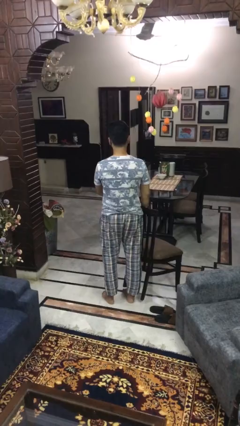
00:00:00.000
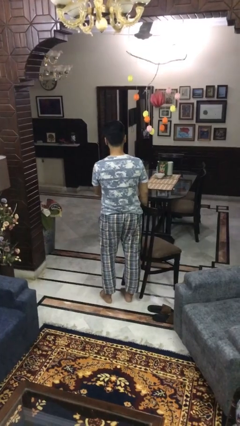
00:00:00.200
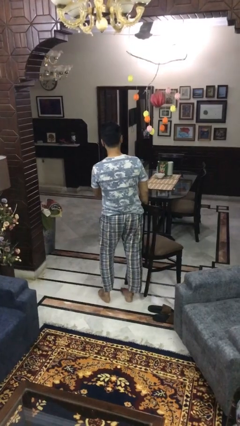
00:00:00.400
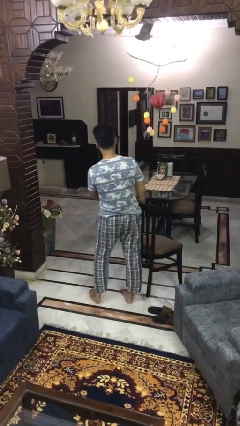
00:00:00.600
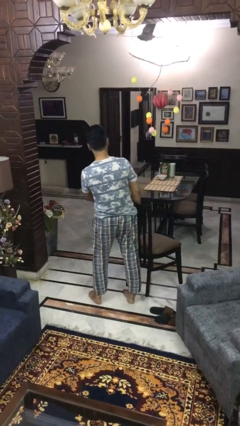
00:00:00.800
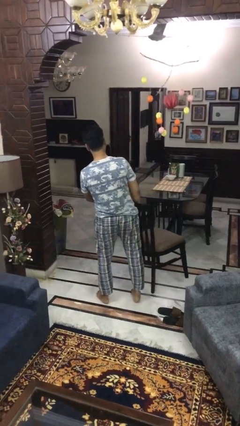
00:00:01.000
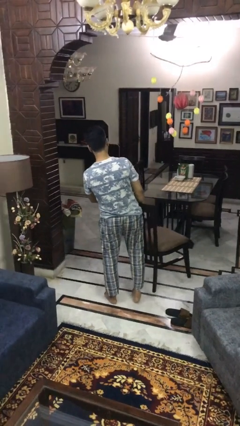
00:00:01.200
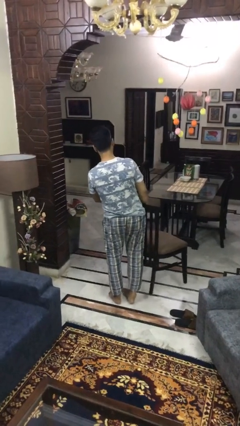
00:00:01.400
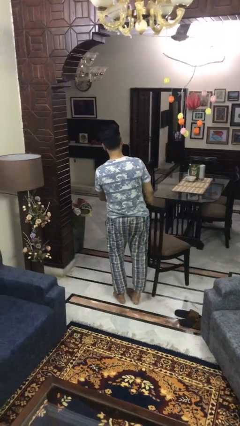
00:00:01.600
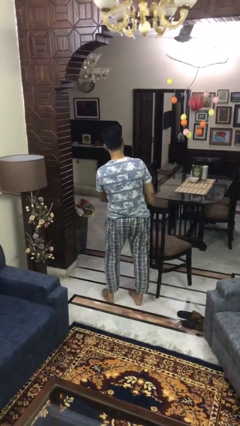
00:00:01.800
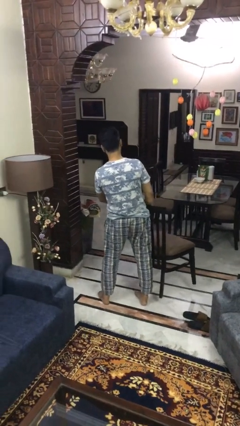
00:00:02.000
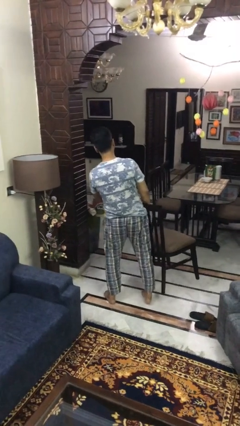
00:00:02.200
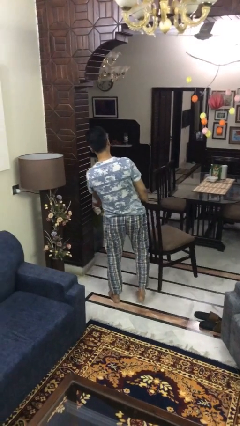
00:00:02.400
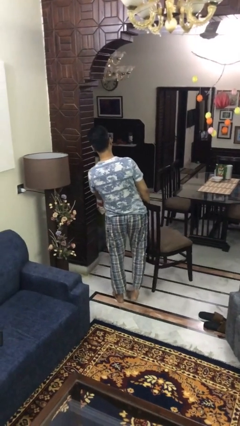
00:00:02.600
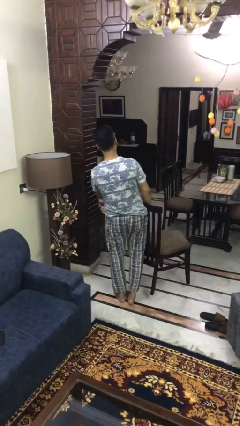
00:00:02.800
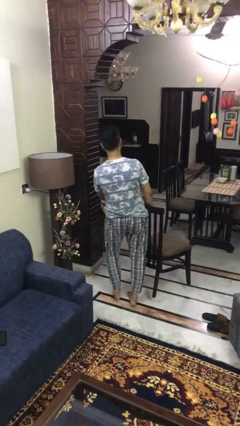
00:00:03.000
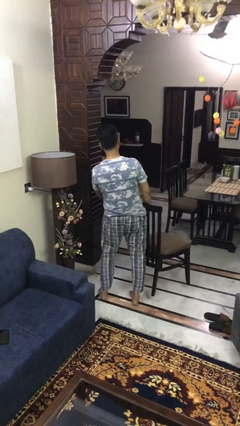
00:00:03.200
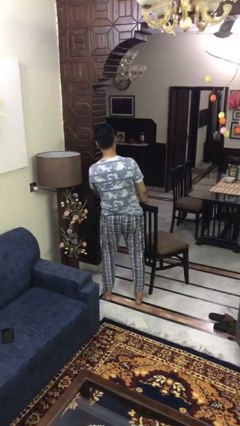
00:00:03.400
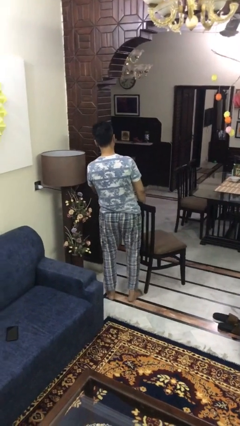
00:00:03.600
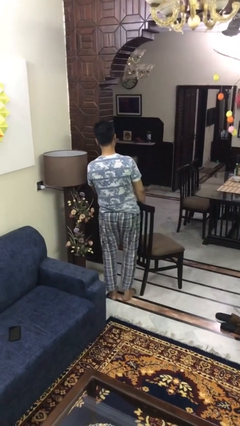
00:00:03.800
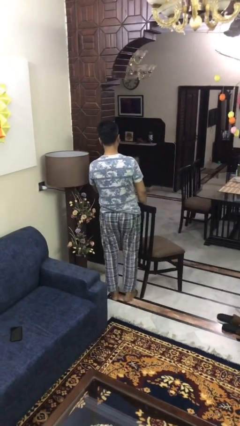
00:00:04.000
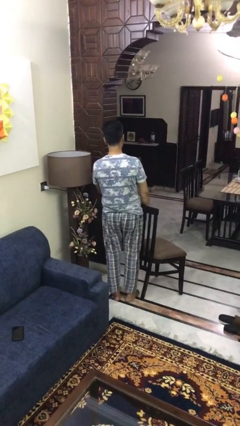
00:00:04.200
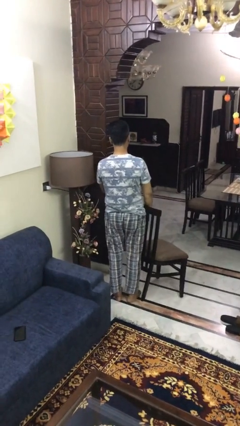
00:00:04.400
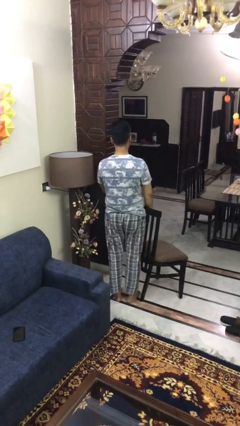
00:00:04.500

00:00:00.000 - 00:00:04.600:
person carries furniture

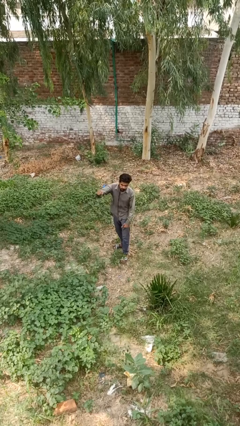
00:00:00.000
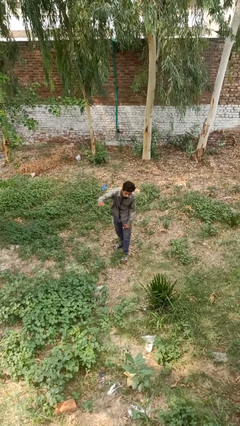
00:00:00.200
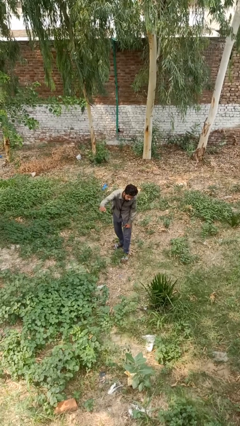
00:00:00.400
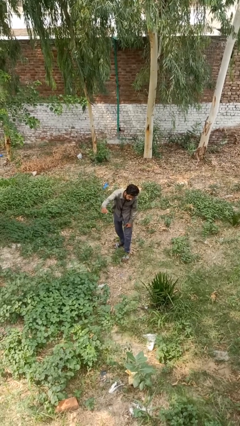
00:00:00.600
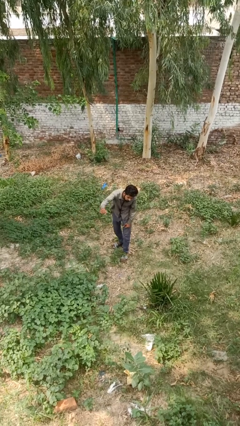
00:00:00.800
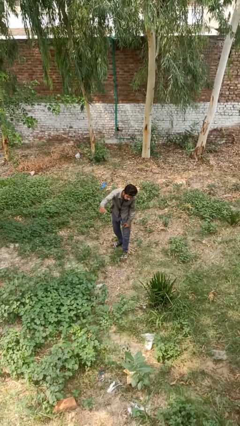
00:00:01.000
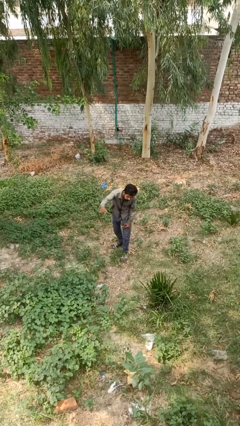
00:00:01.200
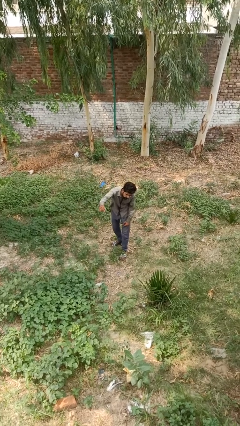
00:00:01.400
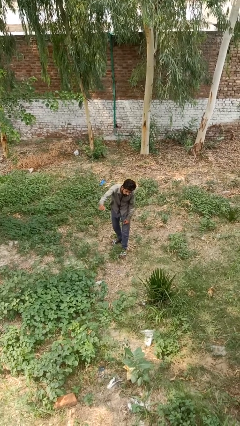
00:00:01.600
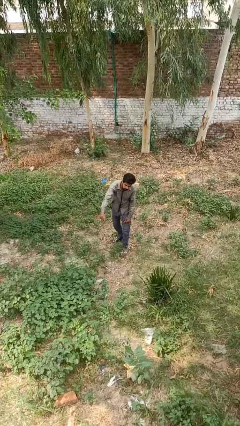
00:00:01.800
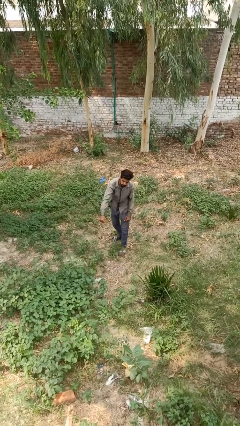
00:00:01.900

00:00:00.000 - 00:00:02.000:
person punches

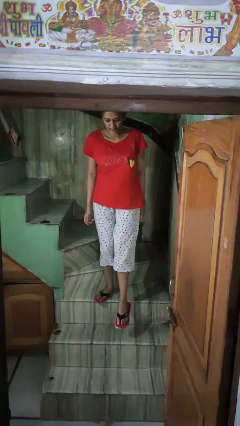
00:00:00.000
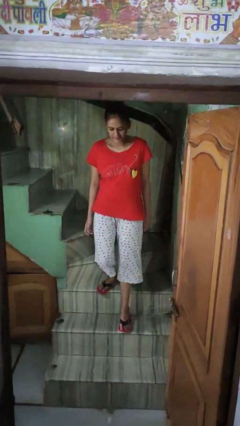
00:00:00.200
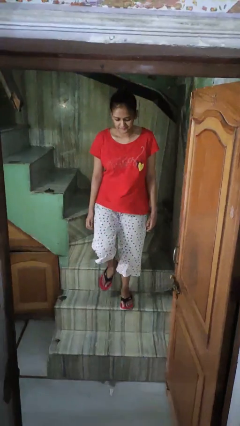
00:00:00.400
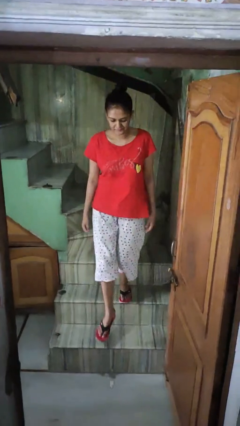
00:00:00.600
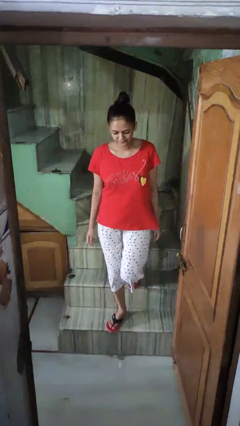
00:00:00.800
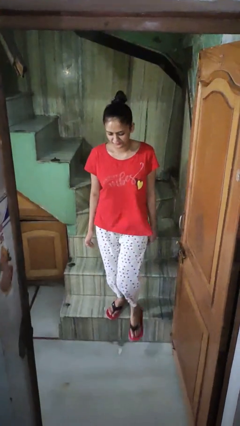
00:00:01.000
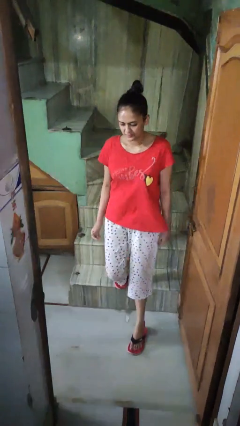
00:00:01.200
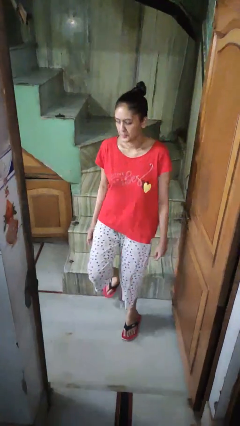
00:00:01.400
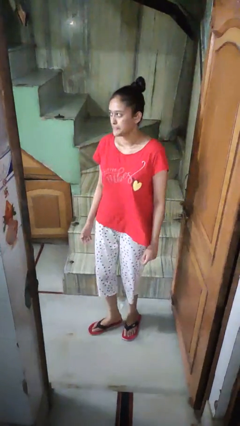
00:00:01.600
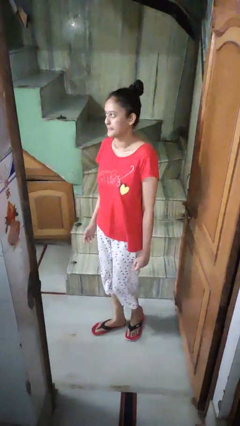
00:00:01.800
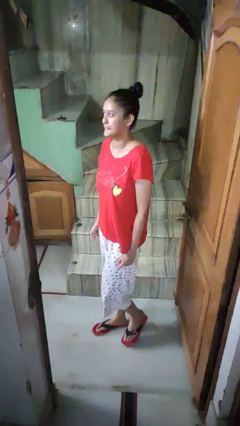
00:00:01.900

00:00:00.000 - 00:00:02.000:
person climbs down stairs

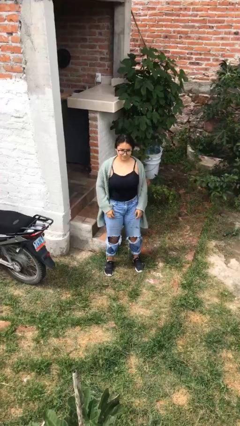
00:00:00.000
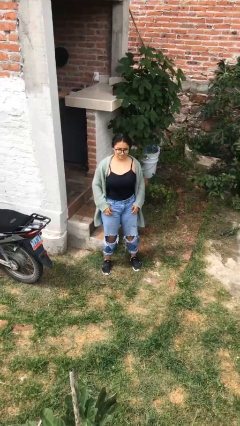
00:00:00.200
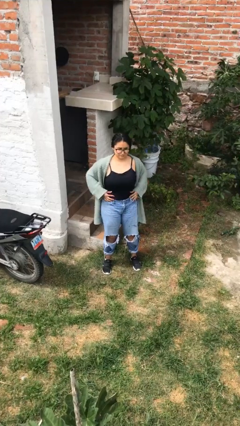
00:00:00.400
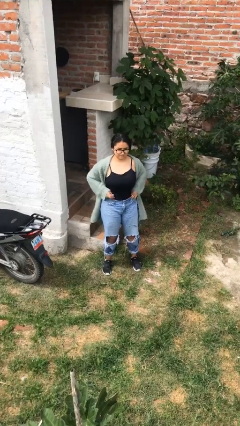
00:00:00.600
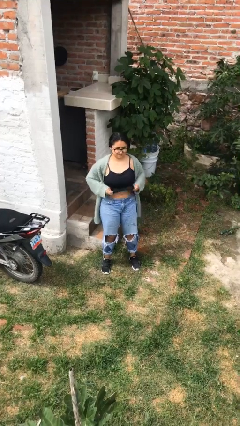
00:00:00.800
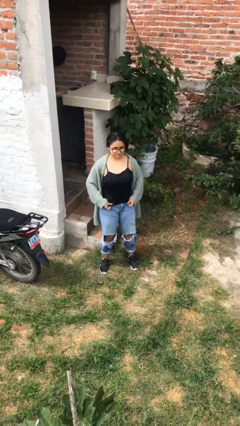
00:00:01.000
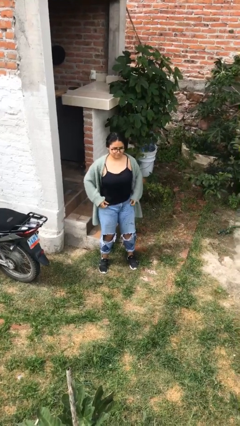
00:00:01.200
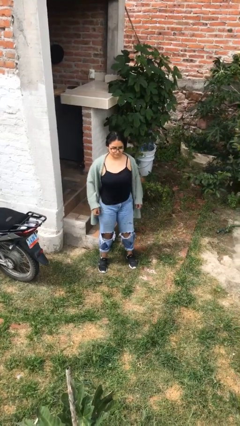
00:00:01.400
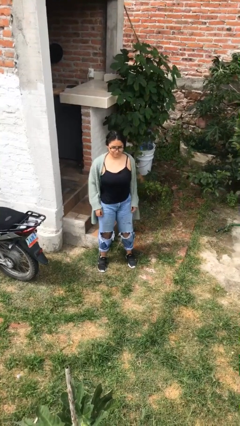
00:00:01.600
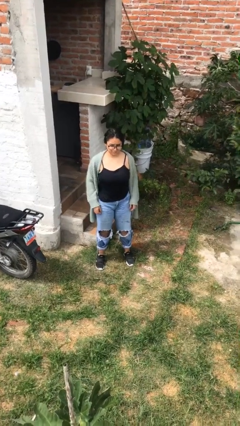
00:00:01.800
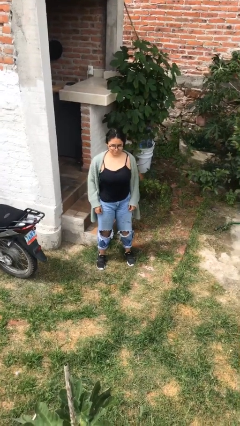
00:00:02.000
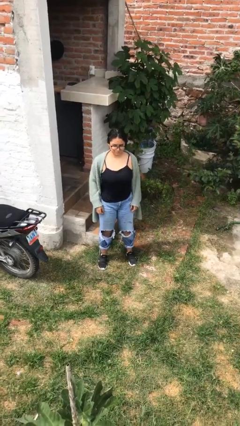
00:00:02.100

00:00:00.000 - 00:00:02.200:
person untucks shirt

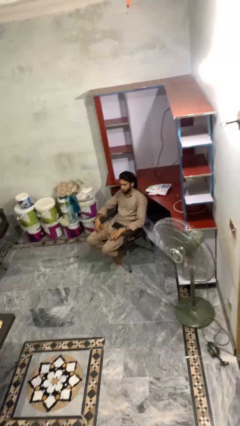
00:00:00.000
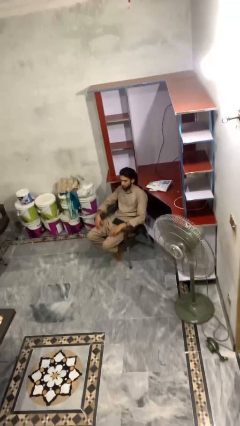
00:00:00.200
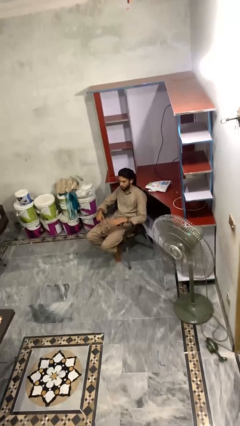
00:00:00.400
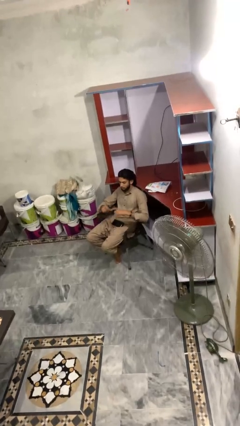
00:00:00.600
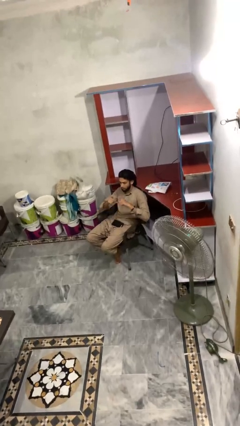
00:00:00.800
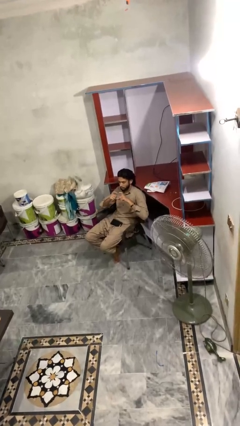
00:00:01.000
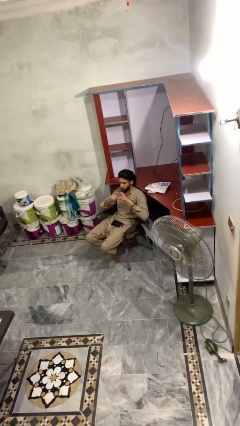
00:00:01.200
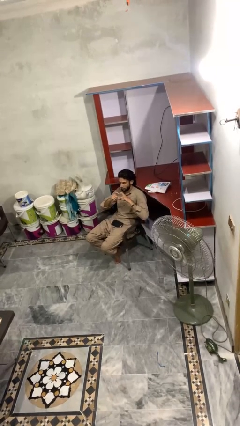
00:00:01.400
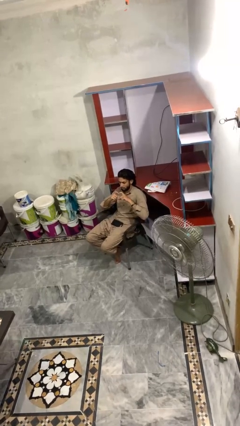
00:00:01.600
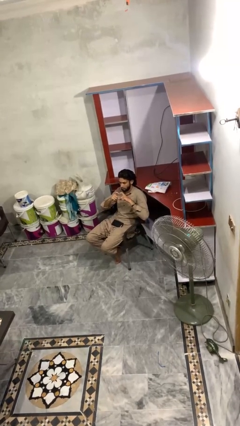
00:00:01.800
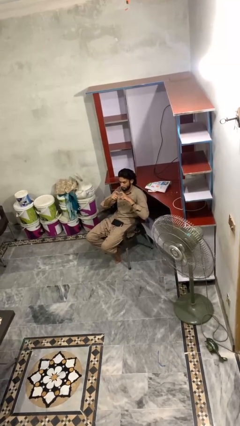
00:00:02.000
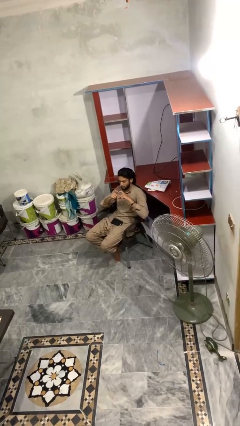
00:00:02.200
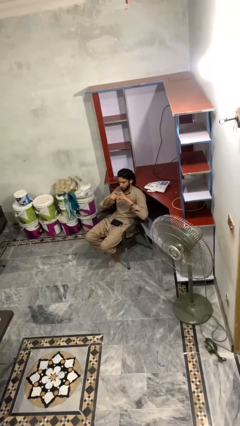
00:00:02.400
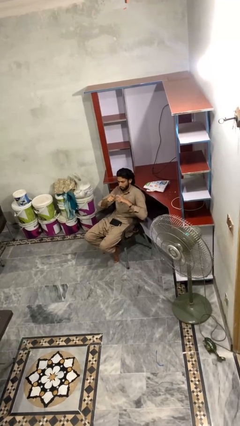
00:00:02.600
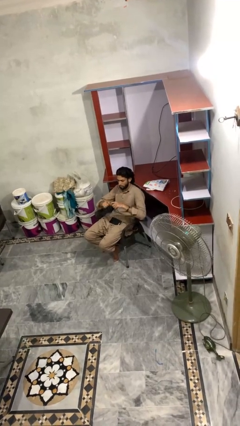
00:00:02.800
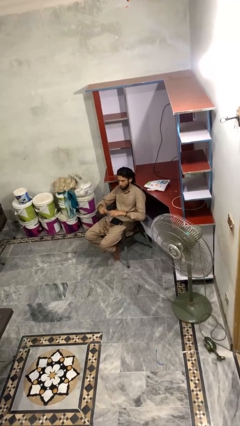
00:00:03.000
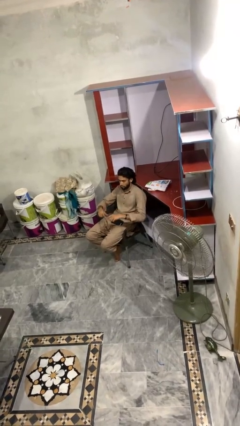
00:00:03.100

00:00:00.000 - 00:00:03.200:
person gestures heart

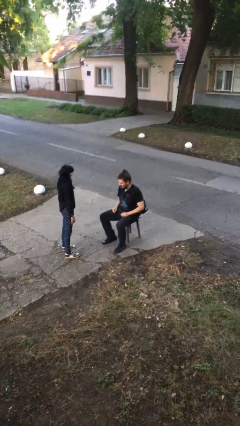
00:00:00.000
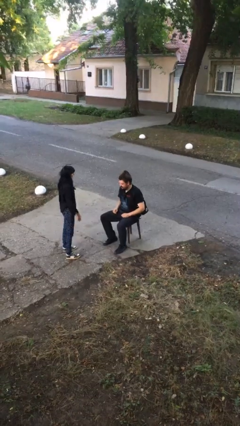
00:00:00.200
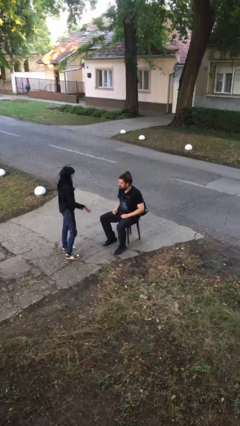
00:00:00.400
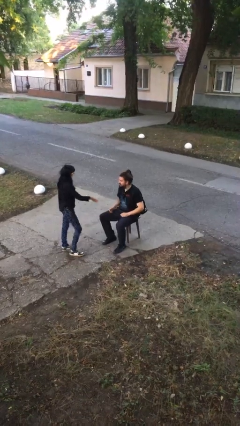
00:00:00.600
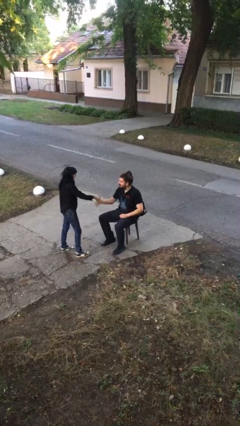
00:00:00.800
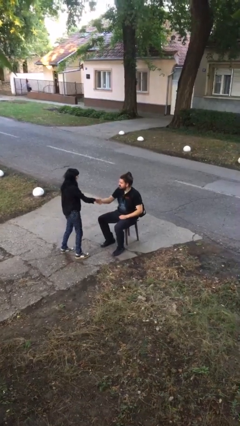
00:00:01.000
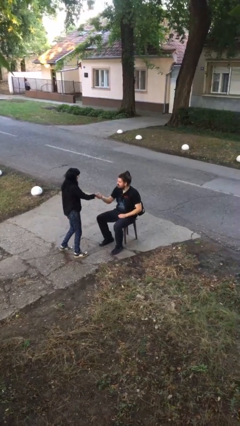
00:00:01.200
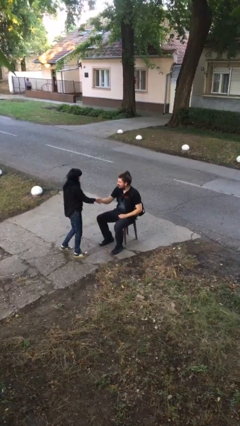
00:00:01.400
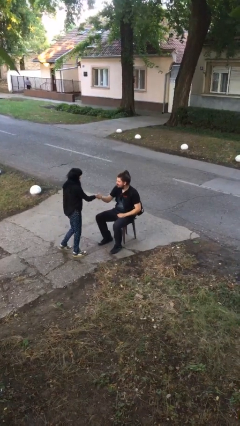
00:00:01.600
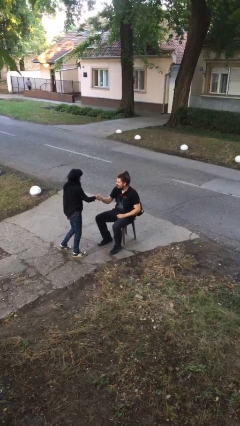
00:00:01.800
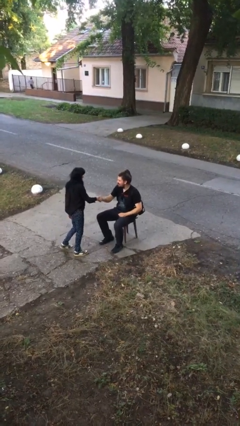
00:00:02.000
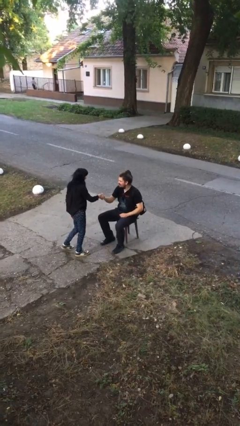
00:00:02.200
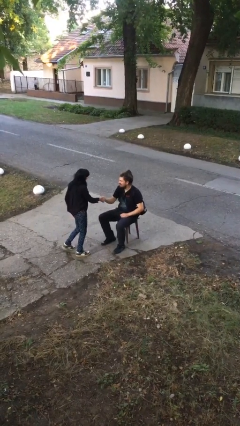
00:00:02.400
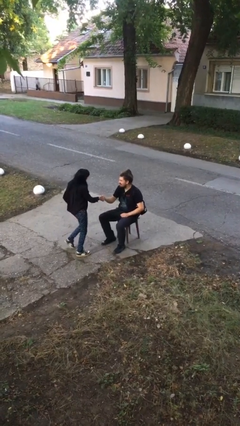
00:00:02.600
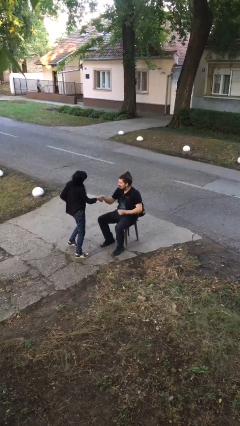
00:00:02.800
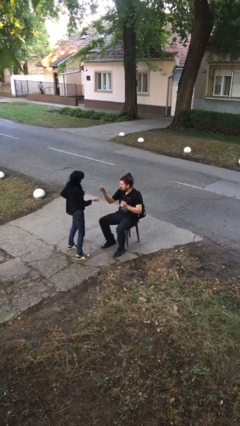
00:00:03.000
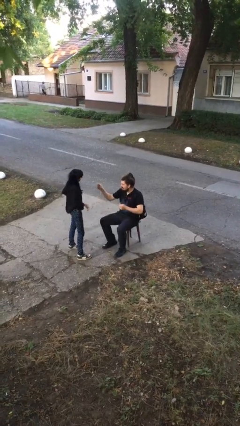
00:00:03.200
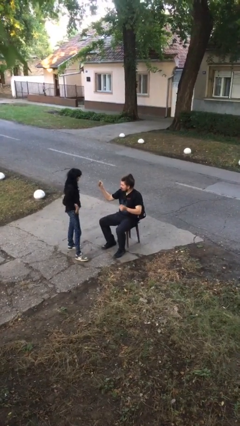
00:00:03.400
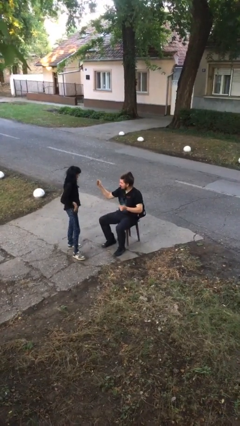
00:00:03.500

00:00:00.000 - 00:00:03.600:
person shakes hand
